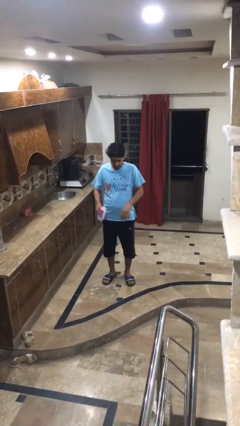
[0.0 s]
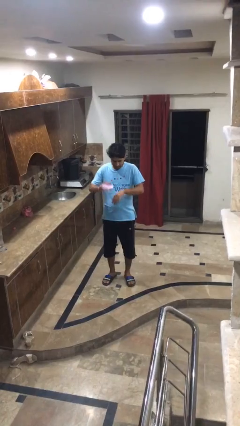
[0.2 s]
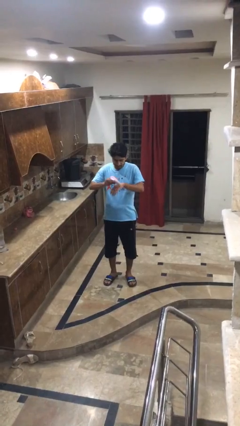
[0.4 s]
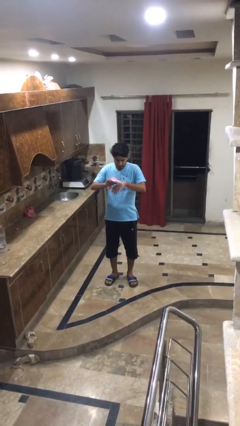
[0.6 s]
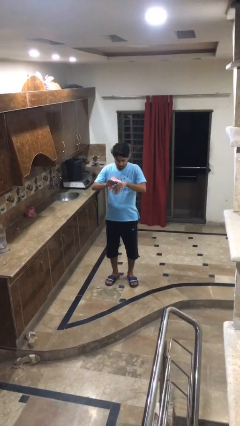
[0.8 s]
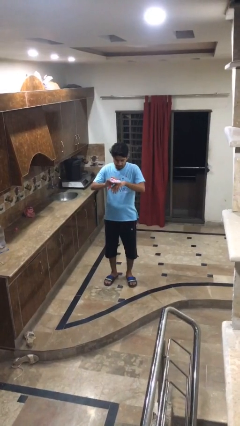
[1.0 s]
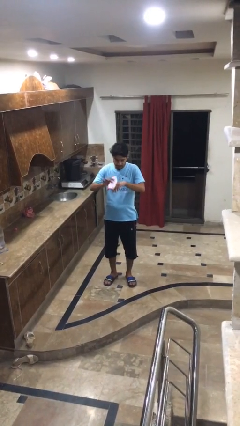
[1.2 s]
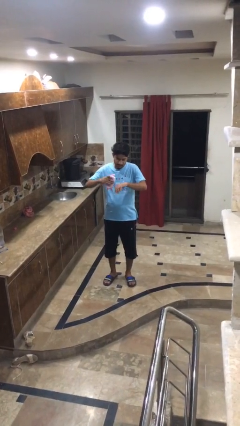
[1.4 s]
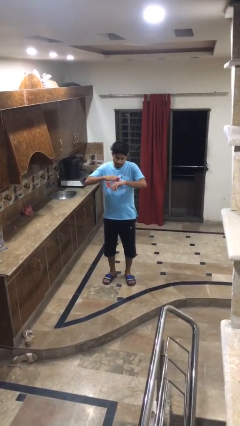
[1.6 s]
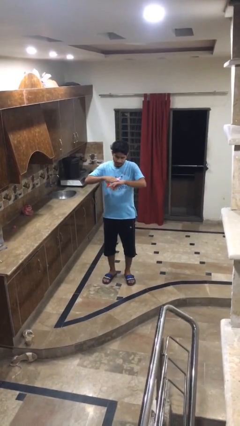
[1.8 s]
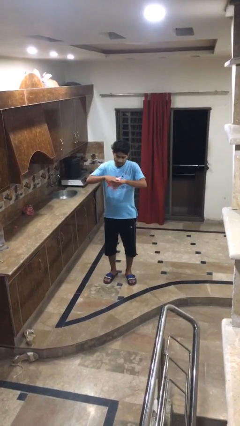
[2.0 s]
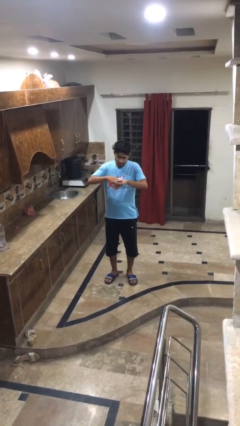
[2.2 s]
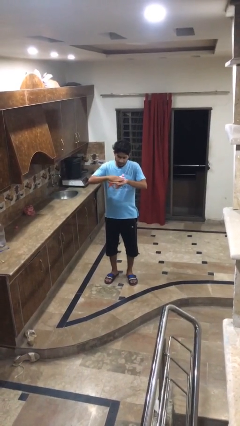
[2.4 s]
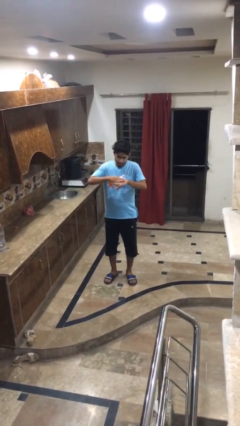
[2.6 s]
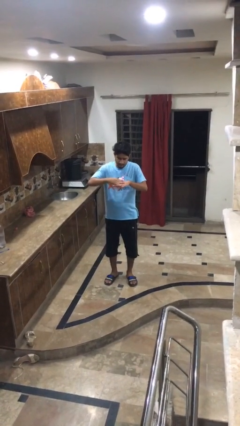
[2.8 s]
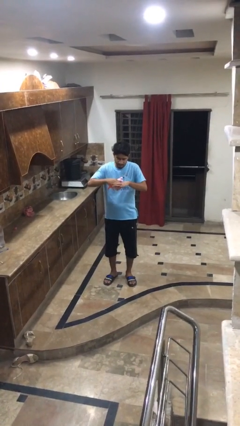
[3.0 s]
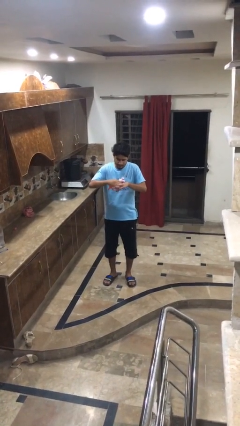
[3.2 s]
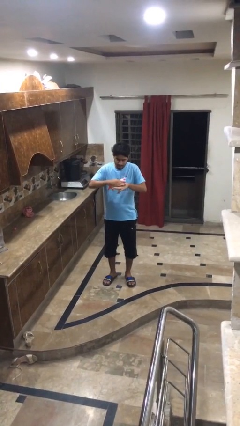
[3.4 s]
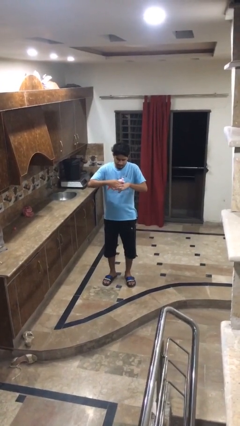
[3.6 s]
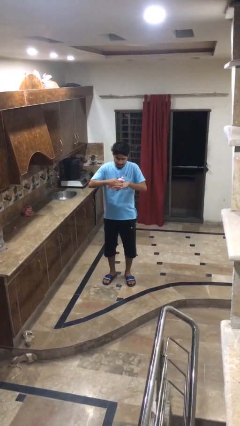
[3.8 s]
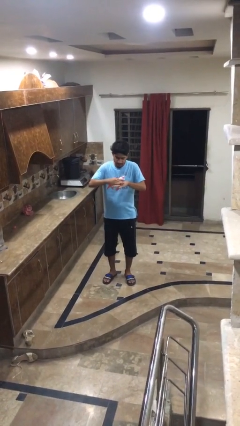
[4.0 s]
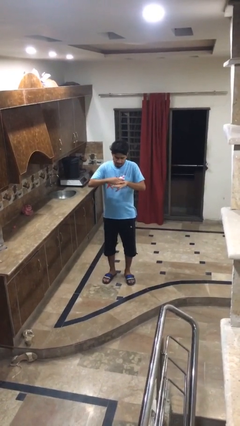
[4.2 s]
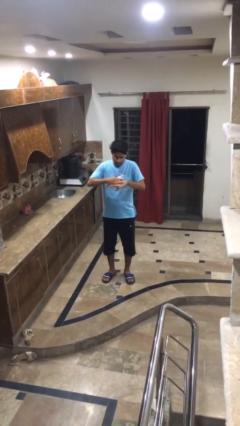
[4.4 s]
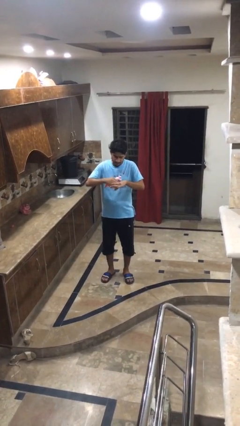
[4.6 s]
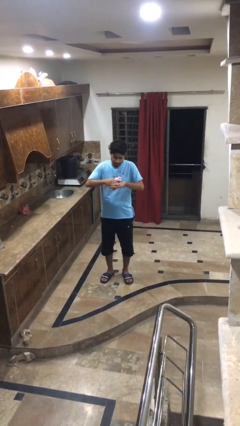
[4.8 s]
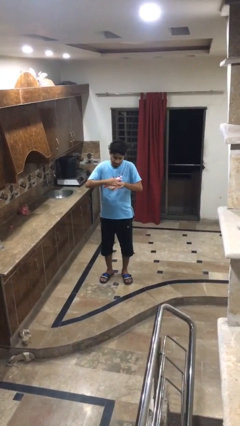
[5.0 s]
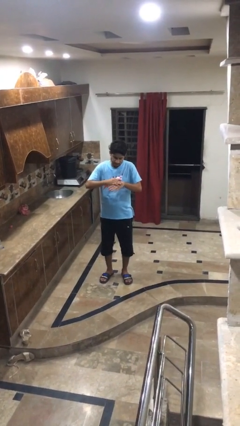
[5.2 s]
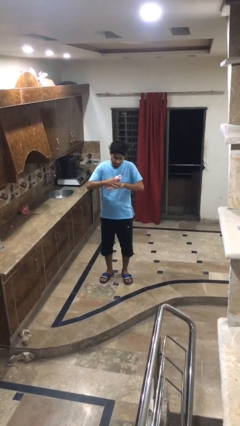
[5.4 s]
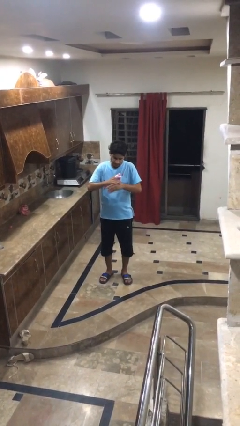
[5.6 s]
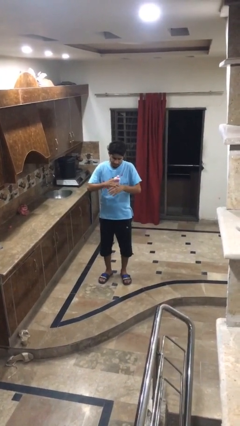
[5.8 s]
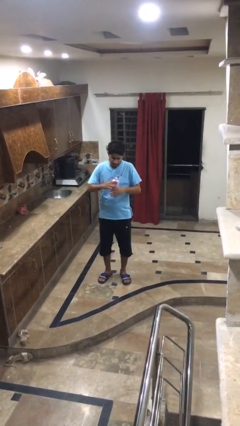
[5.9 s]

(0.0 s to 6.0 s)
person applies sunscreen

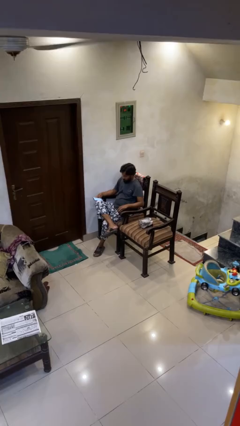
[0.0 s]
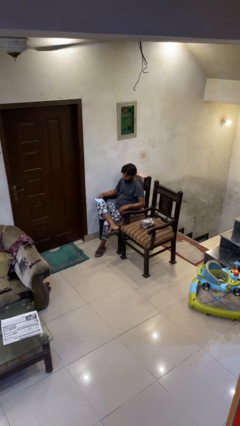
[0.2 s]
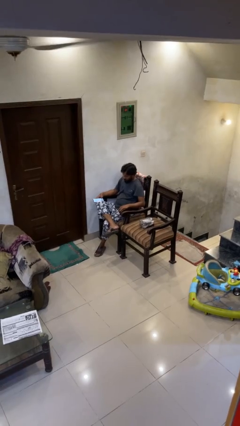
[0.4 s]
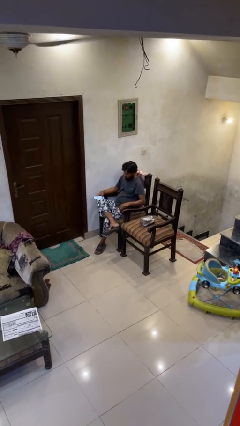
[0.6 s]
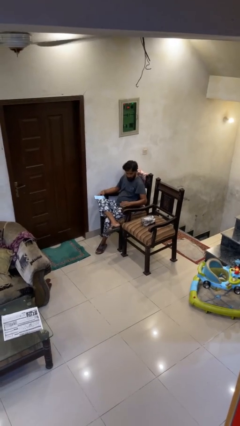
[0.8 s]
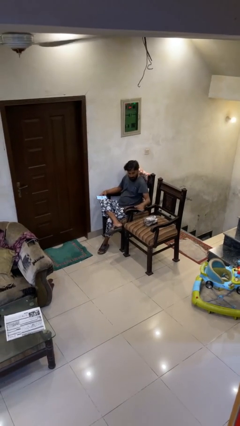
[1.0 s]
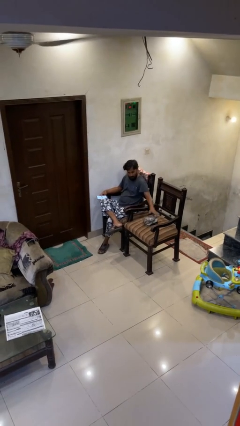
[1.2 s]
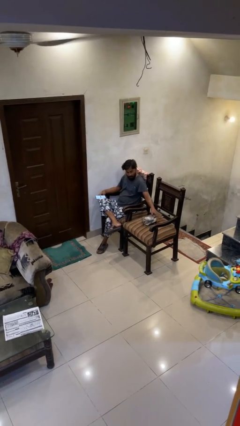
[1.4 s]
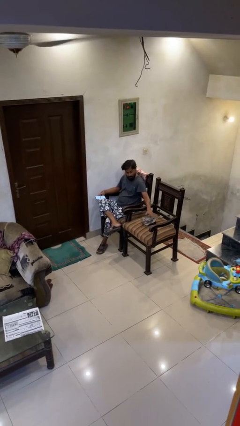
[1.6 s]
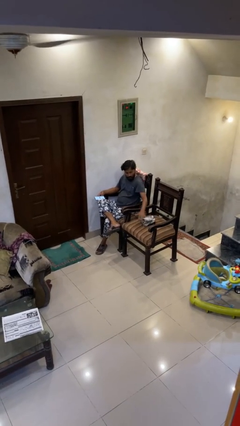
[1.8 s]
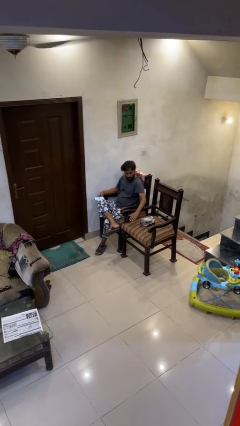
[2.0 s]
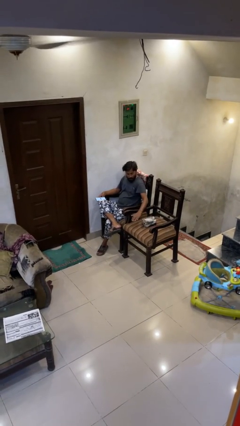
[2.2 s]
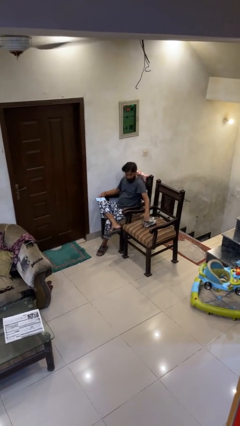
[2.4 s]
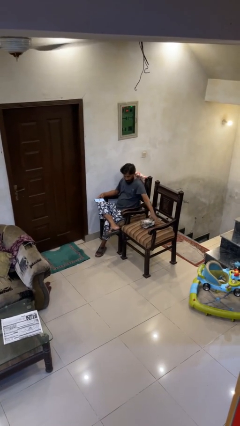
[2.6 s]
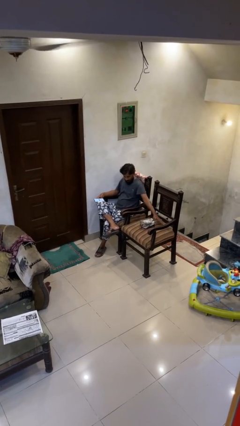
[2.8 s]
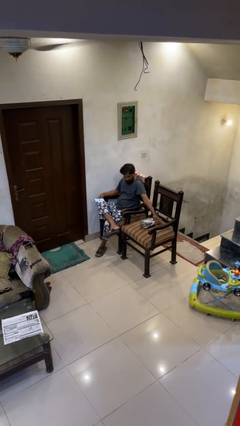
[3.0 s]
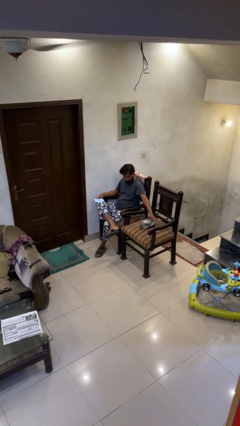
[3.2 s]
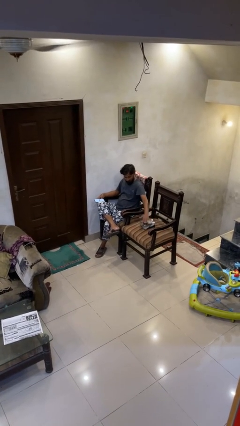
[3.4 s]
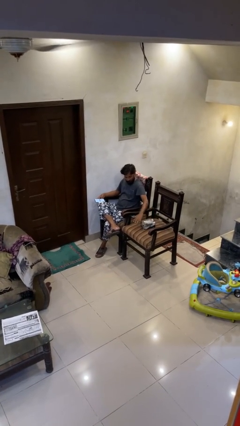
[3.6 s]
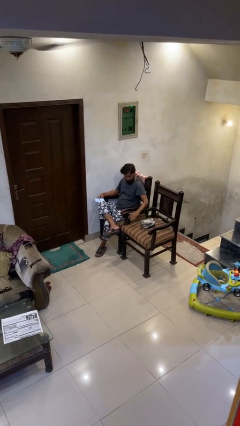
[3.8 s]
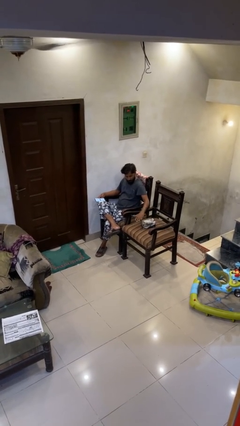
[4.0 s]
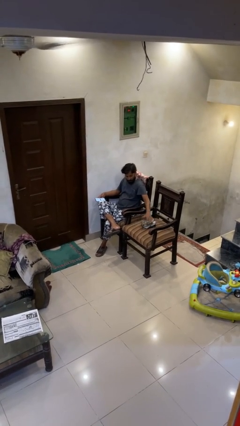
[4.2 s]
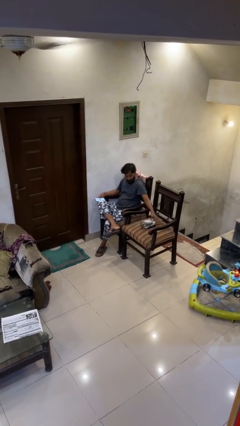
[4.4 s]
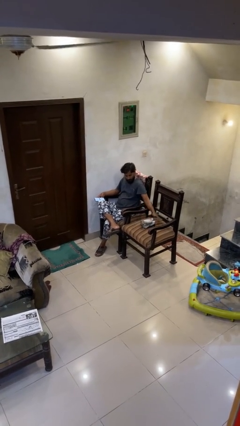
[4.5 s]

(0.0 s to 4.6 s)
person waves hand over object

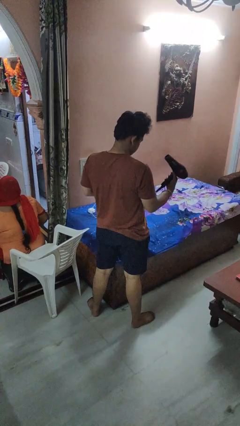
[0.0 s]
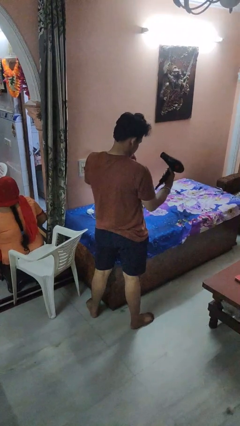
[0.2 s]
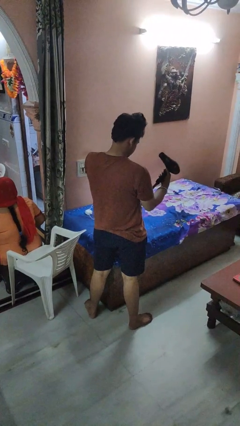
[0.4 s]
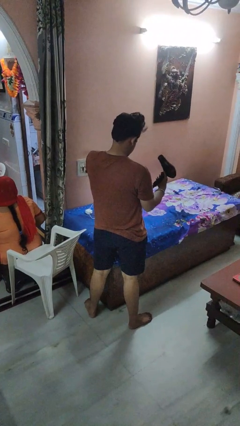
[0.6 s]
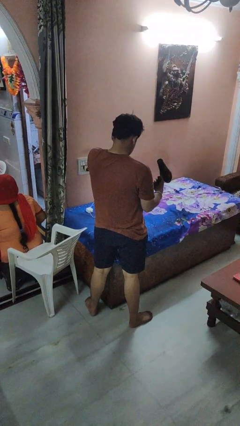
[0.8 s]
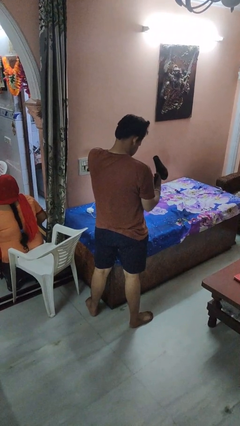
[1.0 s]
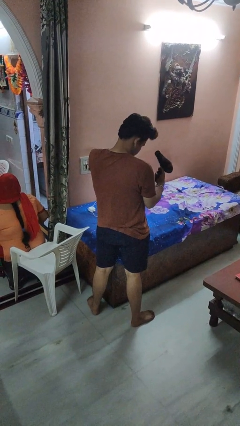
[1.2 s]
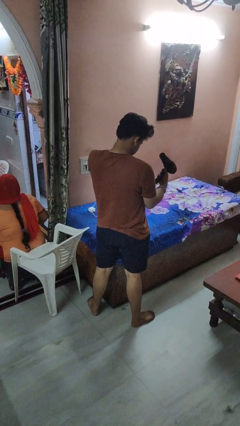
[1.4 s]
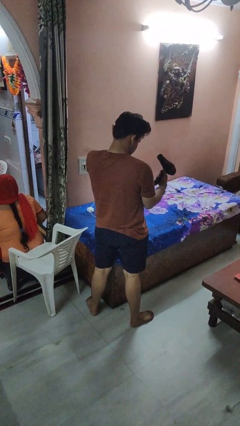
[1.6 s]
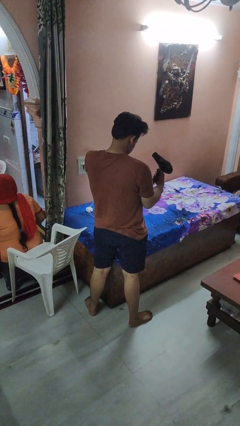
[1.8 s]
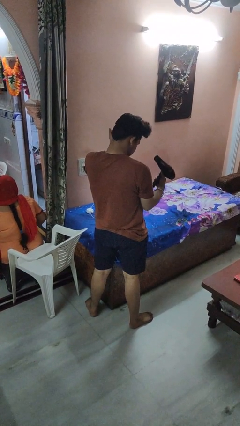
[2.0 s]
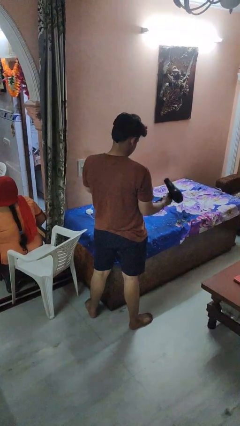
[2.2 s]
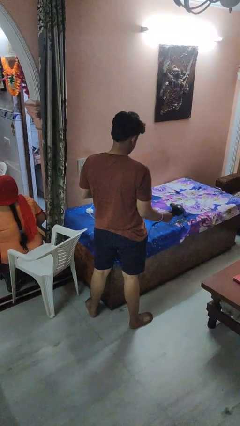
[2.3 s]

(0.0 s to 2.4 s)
person dries hair with hairdryer

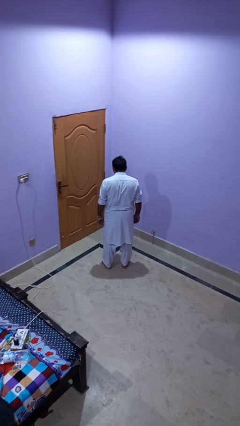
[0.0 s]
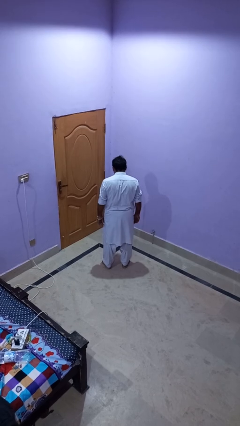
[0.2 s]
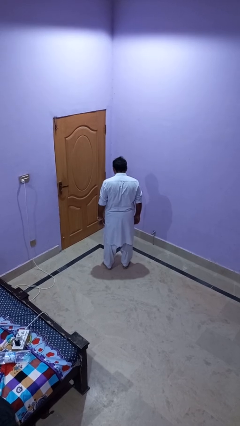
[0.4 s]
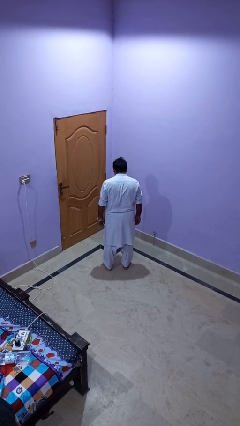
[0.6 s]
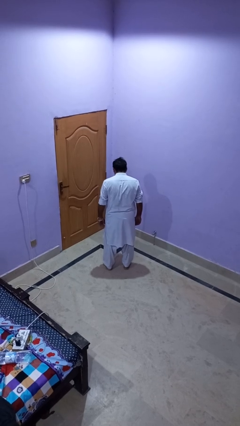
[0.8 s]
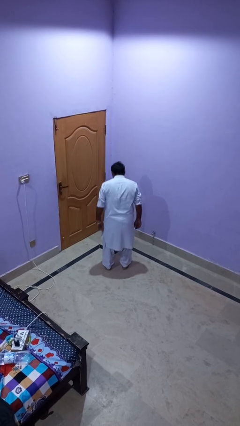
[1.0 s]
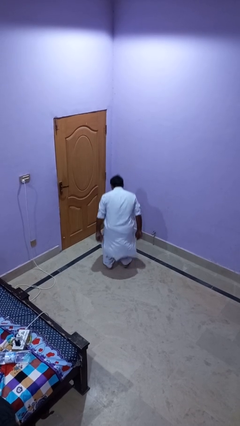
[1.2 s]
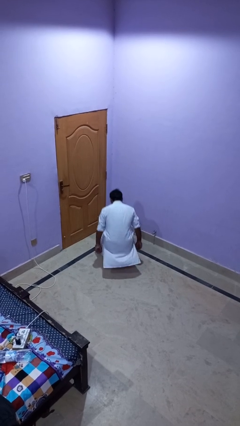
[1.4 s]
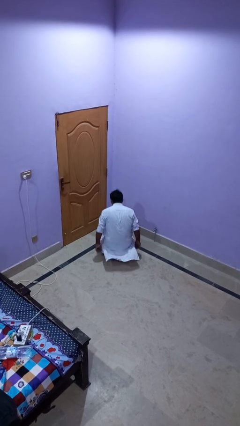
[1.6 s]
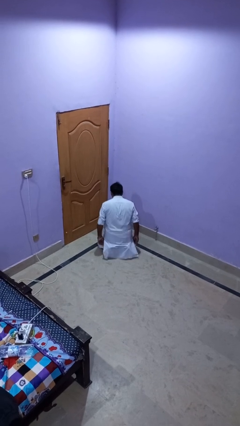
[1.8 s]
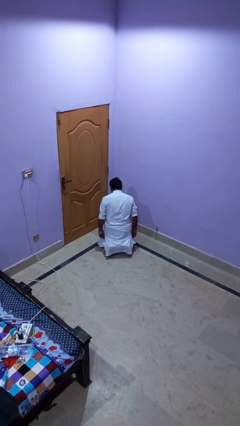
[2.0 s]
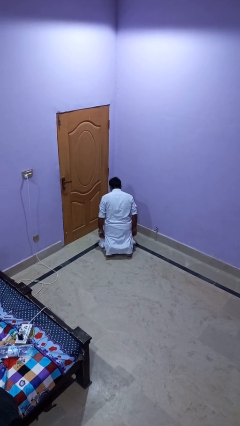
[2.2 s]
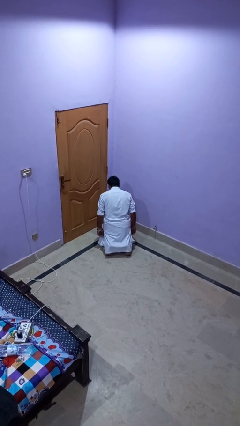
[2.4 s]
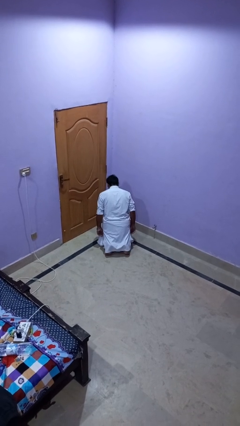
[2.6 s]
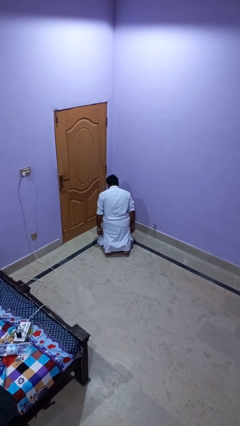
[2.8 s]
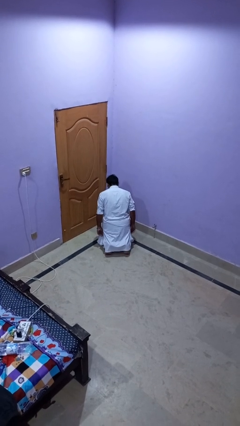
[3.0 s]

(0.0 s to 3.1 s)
person kneels

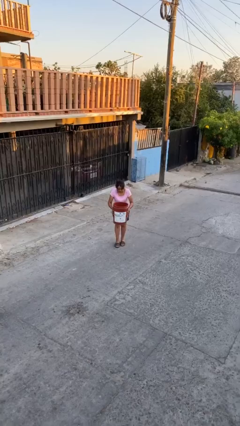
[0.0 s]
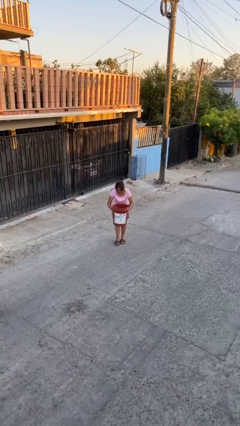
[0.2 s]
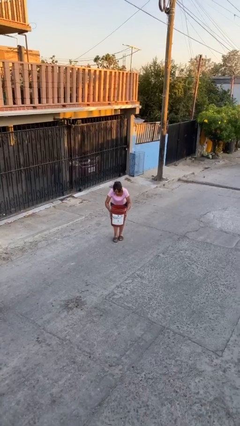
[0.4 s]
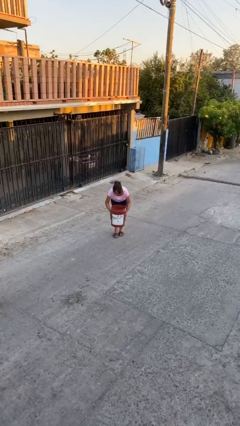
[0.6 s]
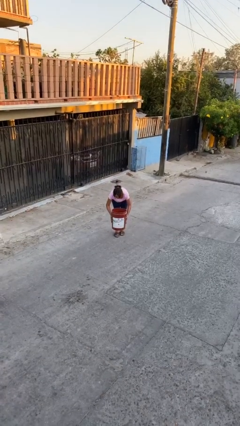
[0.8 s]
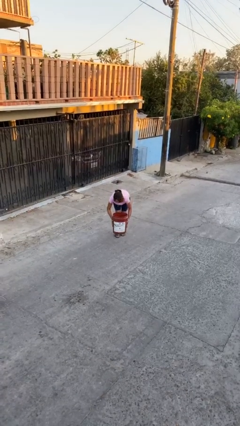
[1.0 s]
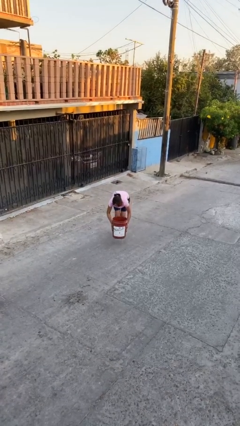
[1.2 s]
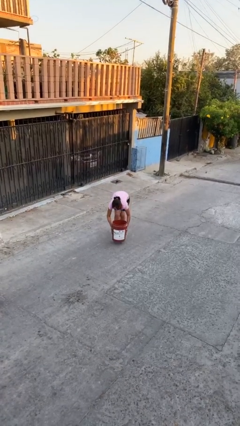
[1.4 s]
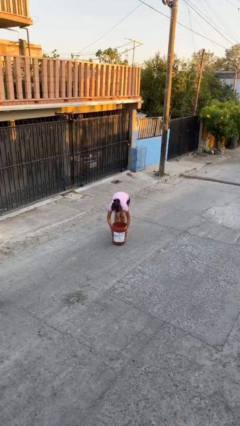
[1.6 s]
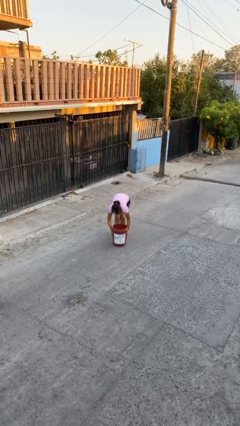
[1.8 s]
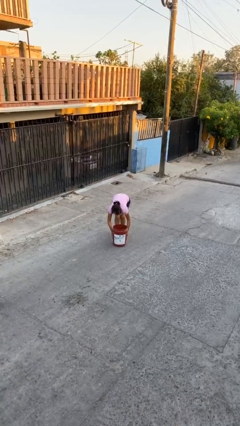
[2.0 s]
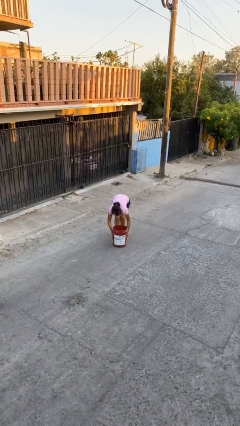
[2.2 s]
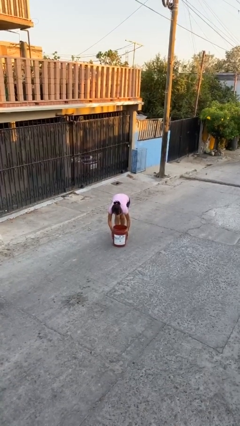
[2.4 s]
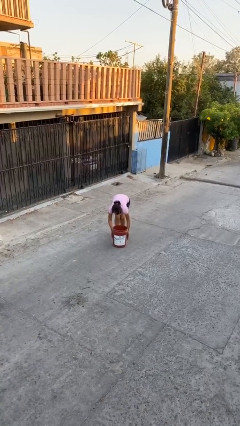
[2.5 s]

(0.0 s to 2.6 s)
person puts down object on floor
